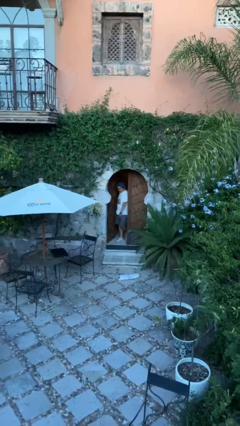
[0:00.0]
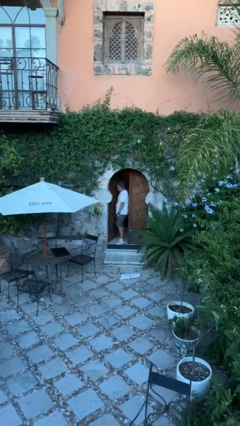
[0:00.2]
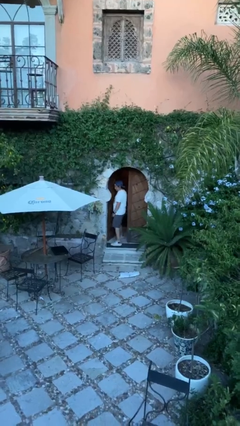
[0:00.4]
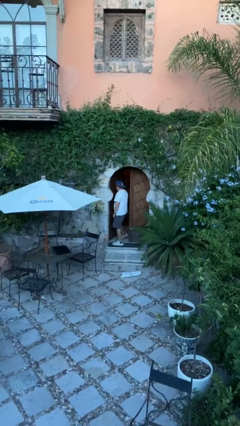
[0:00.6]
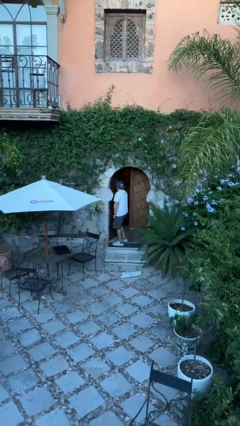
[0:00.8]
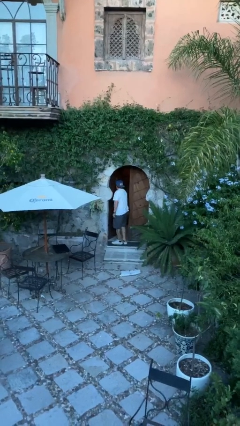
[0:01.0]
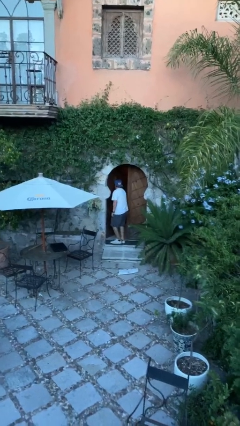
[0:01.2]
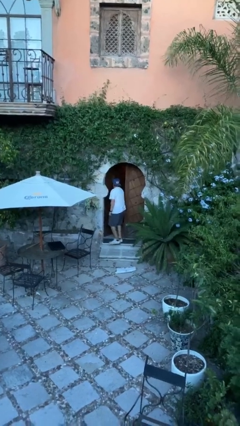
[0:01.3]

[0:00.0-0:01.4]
person enters scene through structure

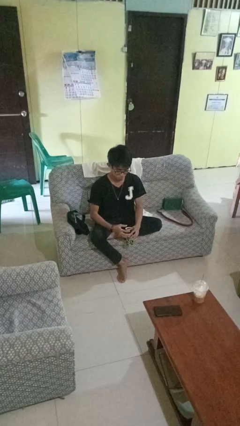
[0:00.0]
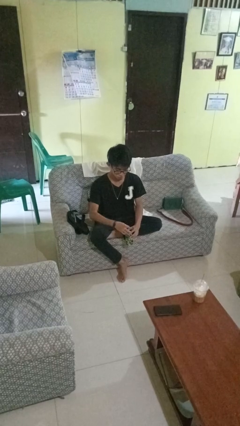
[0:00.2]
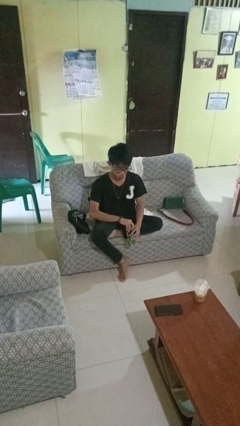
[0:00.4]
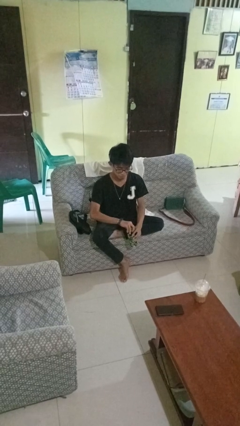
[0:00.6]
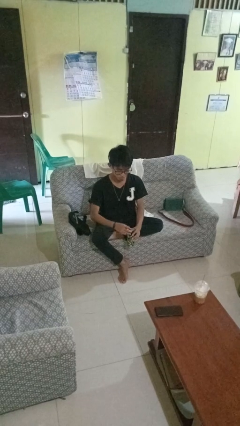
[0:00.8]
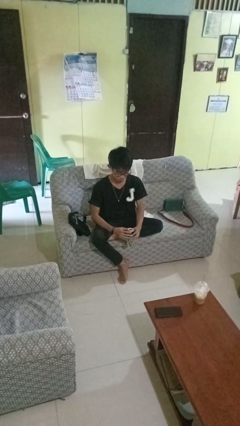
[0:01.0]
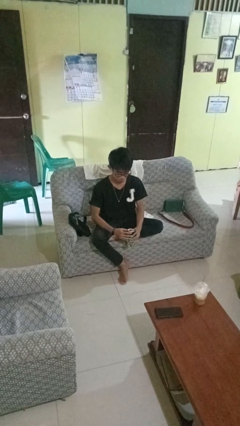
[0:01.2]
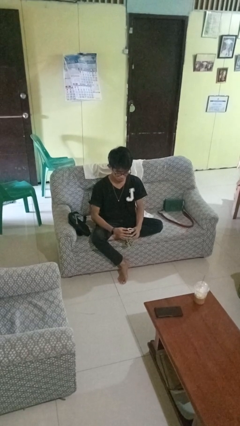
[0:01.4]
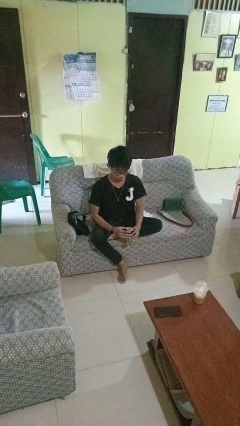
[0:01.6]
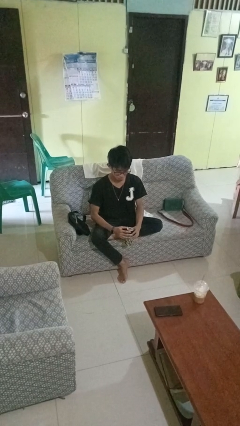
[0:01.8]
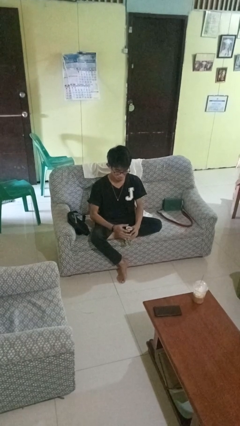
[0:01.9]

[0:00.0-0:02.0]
person opens beverage can

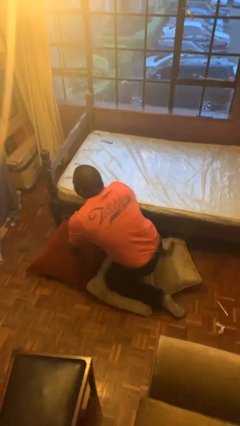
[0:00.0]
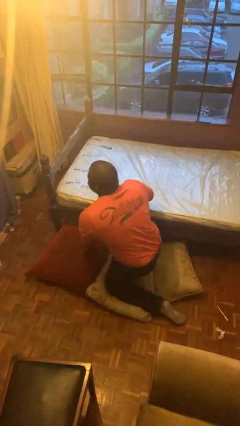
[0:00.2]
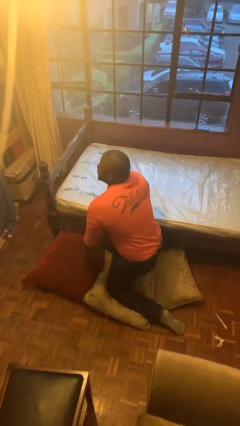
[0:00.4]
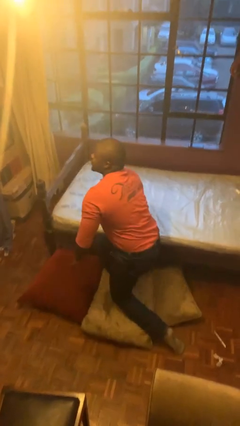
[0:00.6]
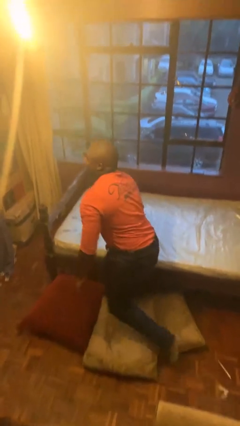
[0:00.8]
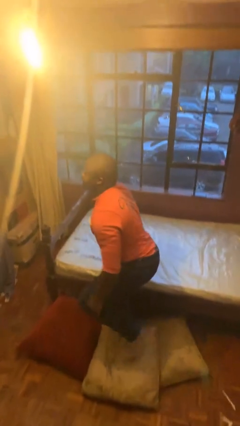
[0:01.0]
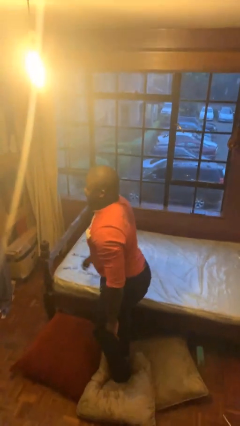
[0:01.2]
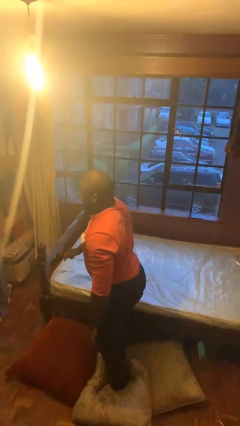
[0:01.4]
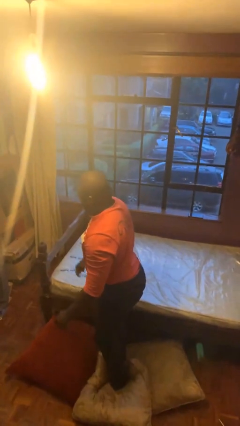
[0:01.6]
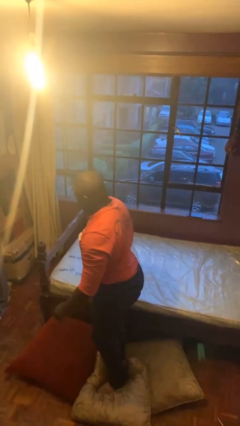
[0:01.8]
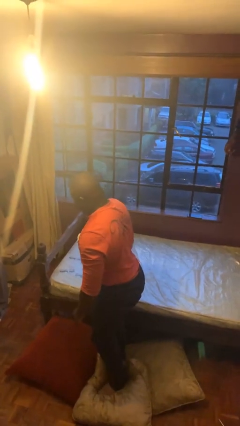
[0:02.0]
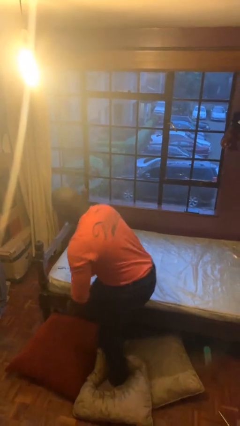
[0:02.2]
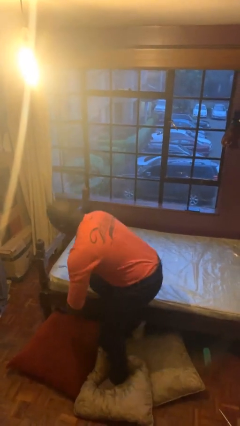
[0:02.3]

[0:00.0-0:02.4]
person stands up from floor

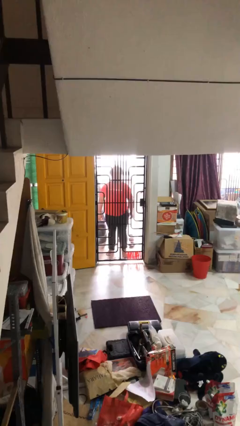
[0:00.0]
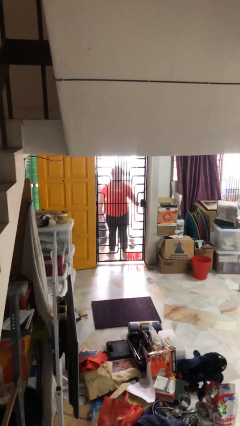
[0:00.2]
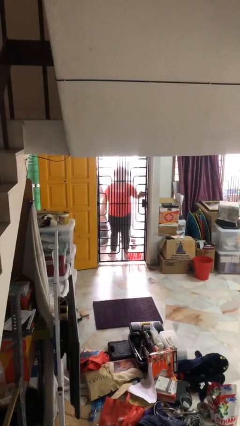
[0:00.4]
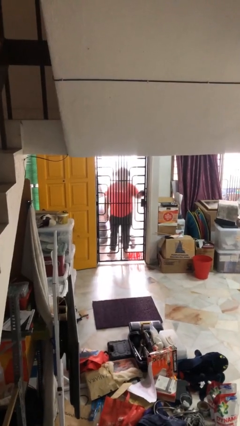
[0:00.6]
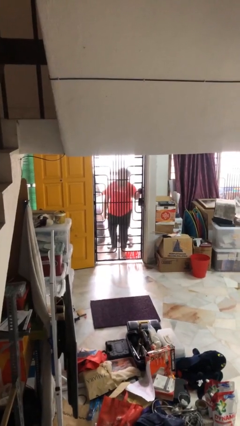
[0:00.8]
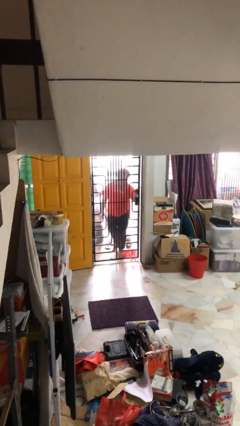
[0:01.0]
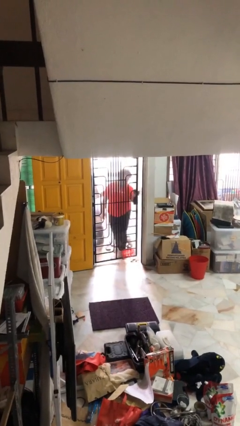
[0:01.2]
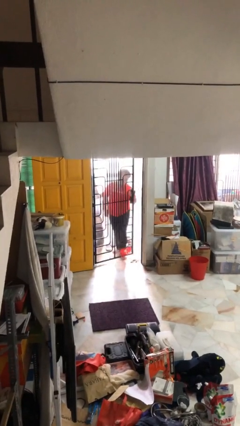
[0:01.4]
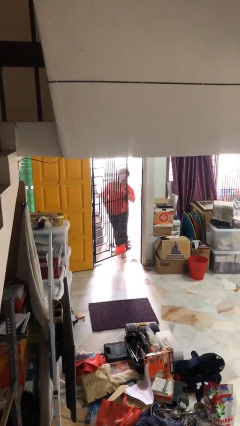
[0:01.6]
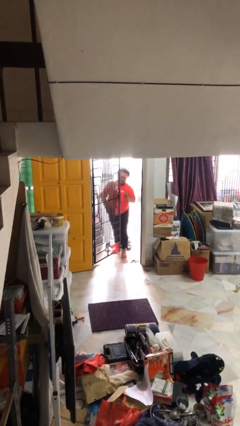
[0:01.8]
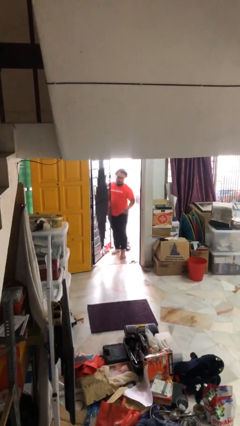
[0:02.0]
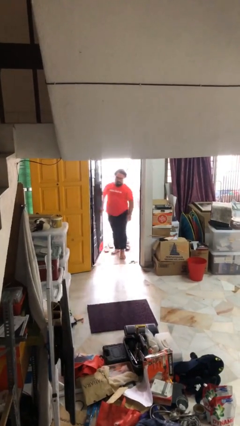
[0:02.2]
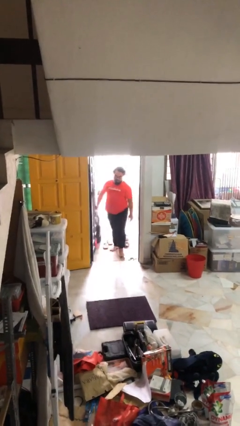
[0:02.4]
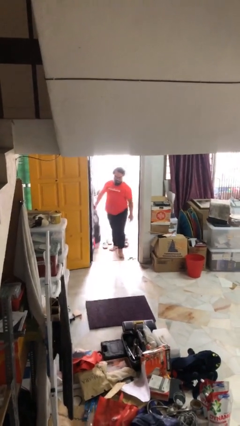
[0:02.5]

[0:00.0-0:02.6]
person opens facility door

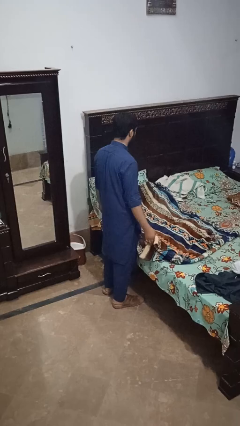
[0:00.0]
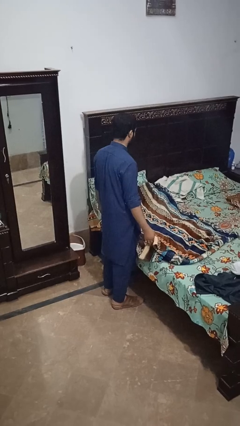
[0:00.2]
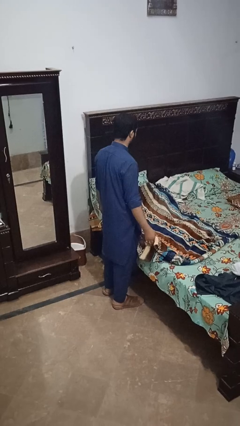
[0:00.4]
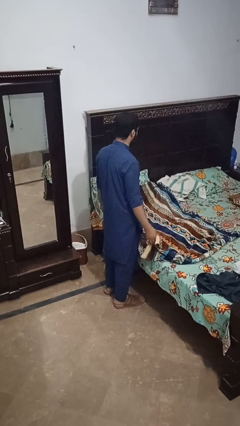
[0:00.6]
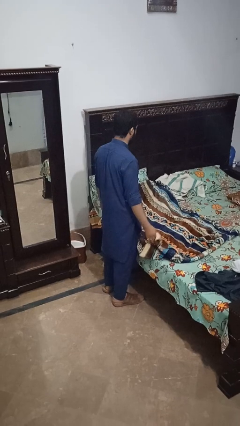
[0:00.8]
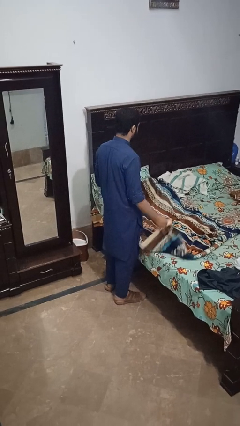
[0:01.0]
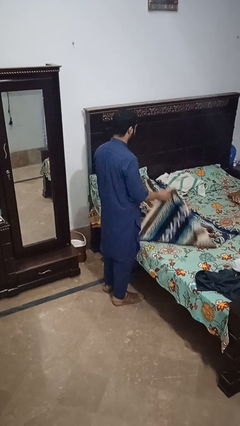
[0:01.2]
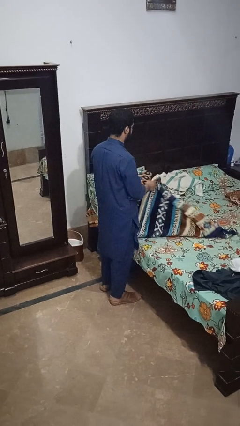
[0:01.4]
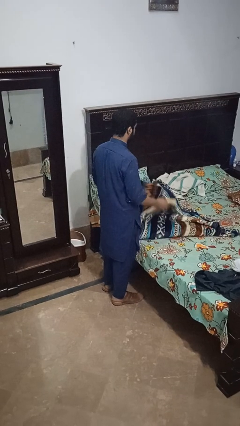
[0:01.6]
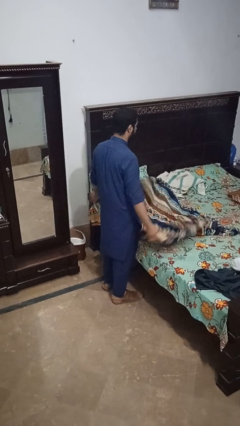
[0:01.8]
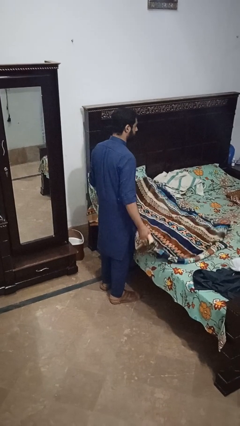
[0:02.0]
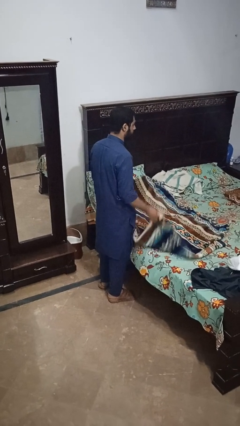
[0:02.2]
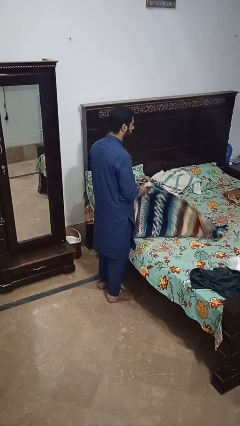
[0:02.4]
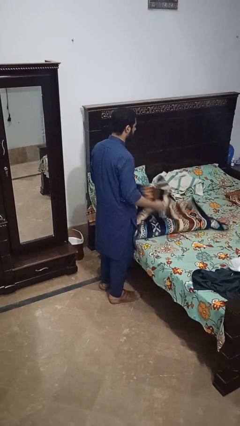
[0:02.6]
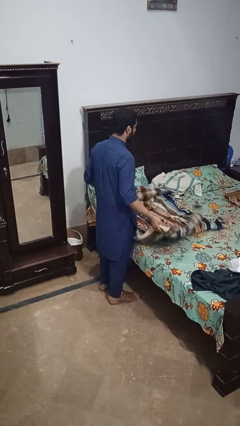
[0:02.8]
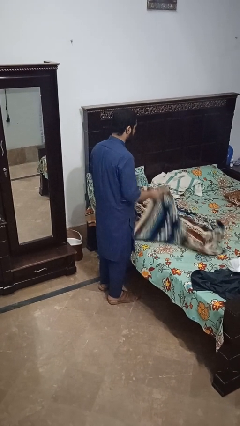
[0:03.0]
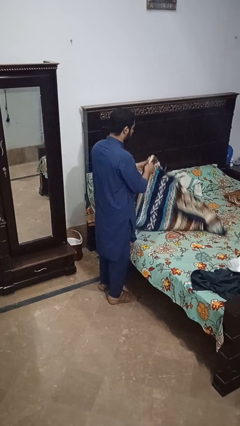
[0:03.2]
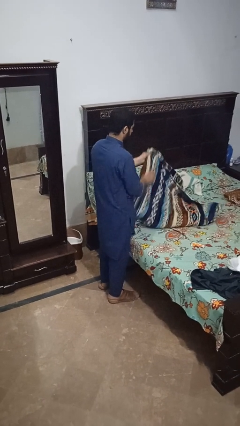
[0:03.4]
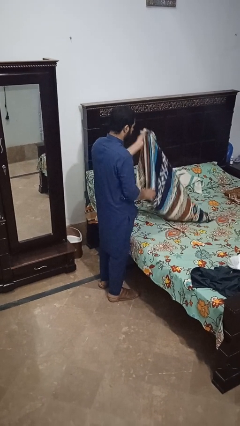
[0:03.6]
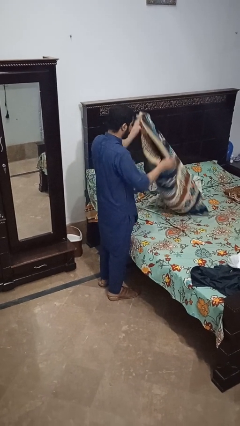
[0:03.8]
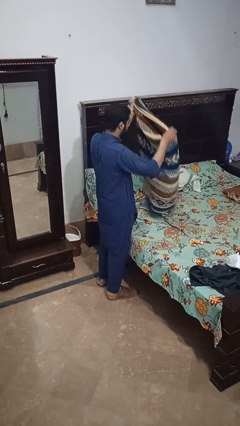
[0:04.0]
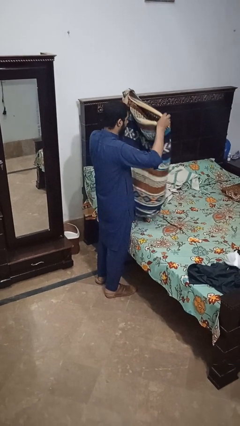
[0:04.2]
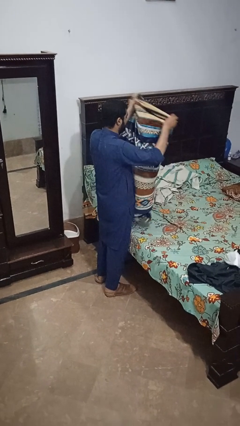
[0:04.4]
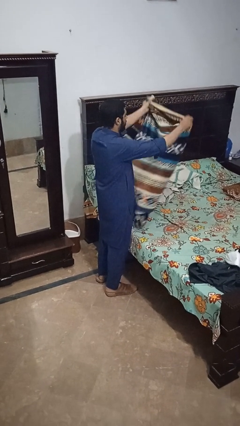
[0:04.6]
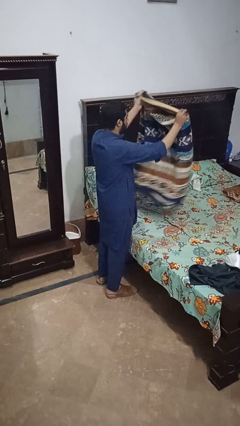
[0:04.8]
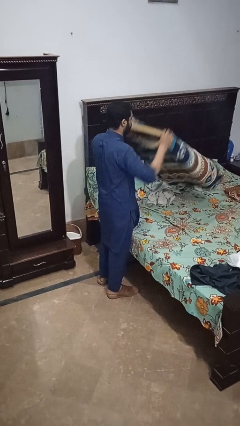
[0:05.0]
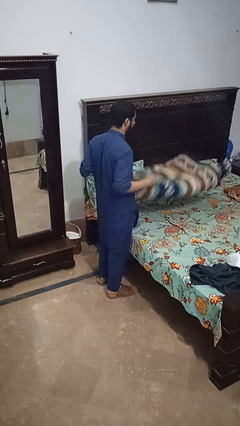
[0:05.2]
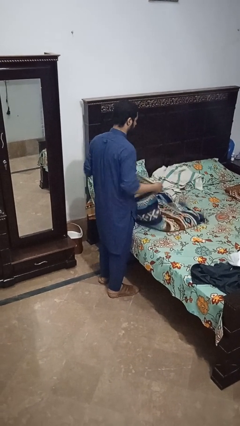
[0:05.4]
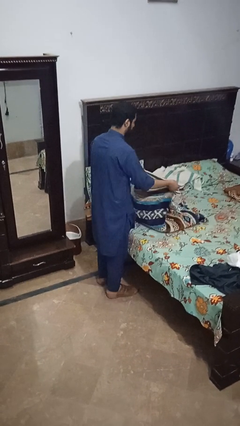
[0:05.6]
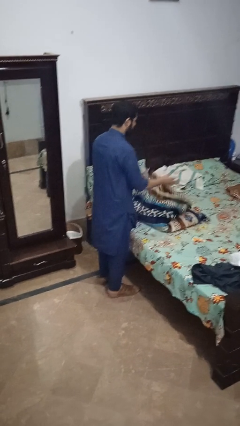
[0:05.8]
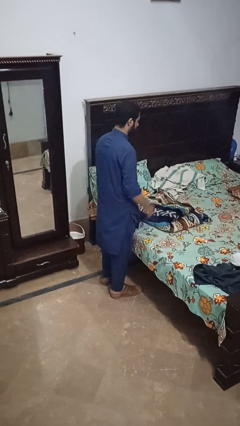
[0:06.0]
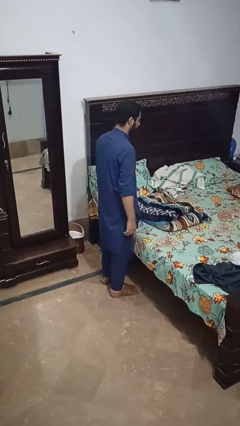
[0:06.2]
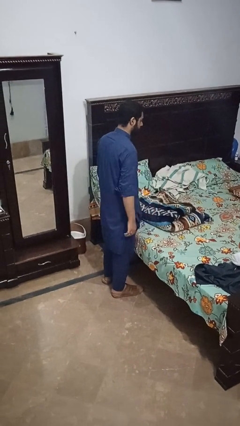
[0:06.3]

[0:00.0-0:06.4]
person folds blanket

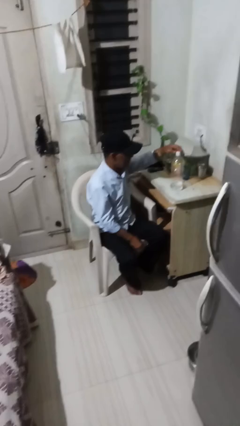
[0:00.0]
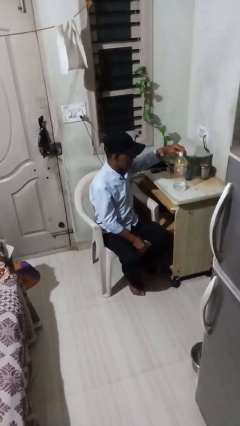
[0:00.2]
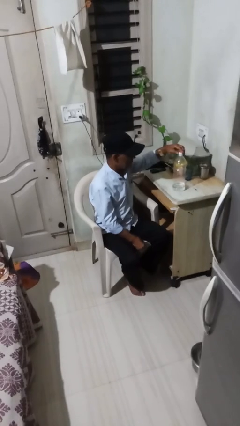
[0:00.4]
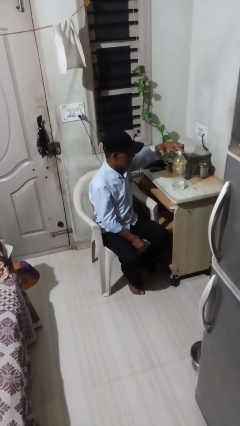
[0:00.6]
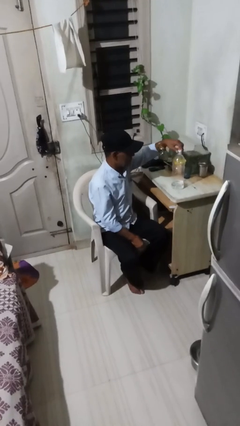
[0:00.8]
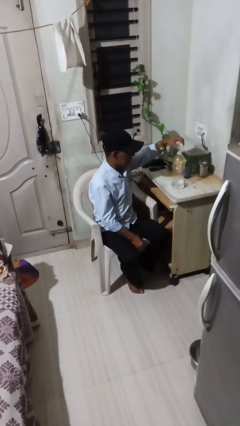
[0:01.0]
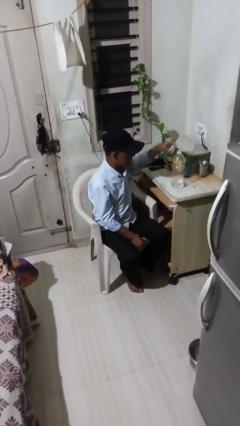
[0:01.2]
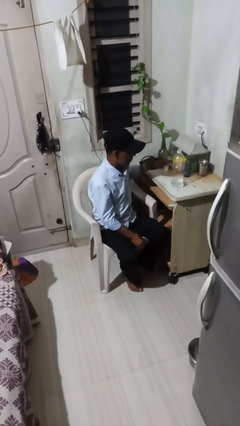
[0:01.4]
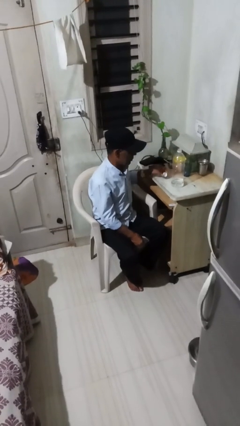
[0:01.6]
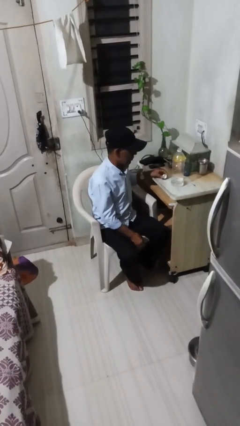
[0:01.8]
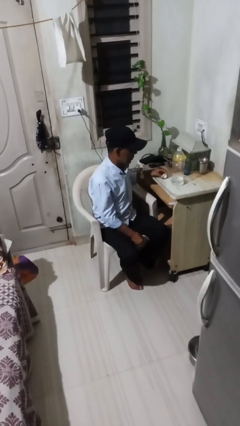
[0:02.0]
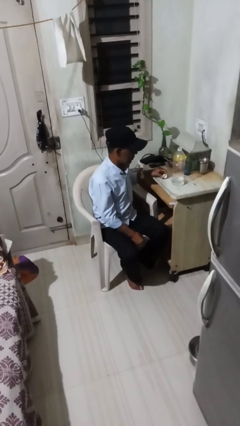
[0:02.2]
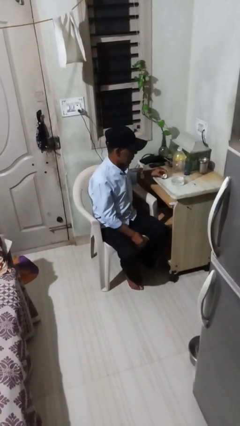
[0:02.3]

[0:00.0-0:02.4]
person unscrews lid from bottle
